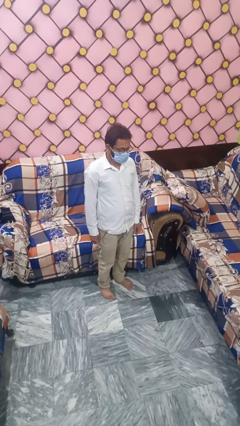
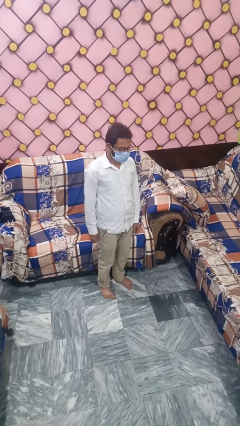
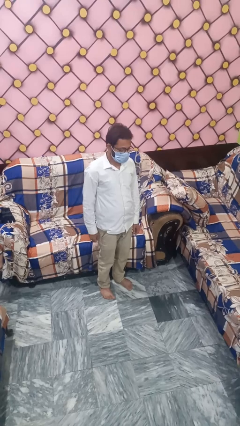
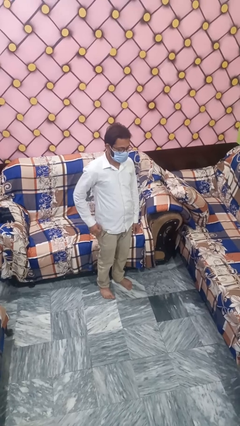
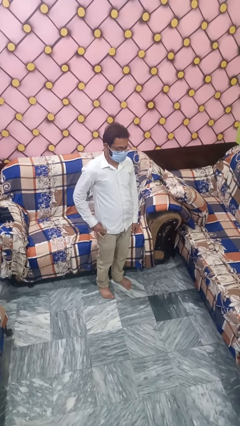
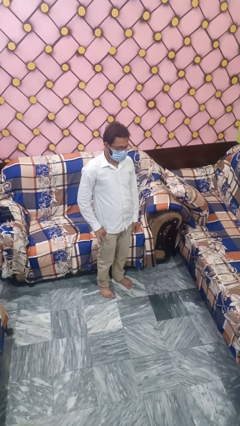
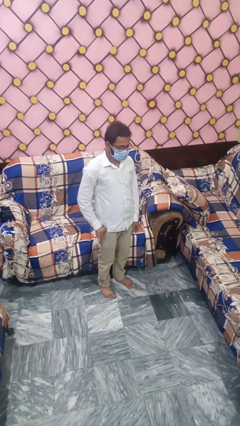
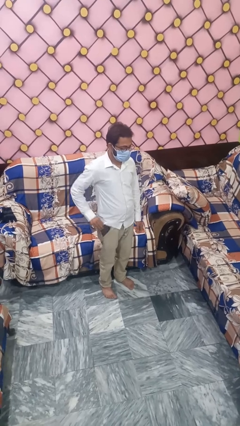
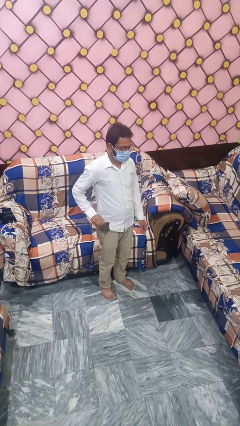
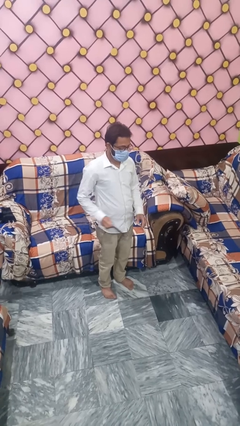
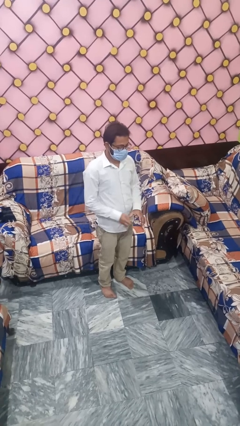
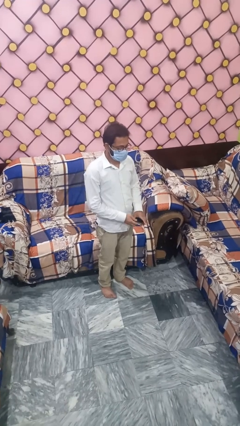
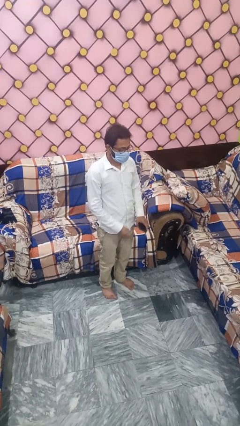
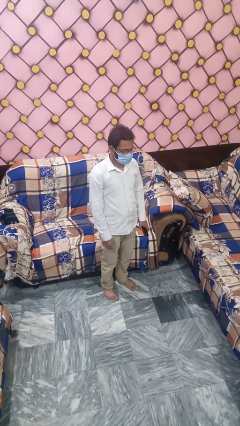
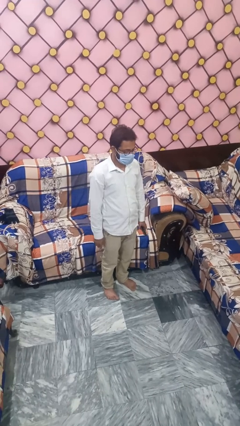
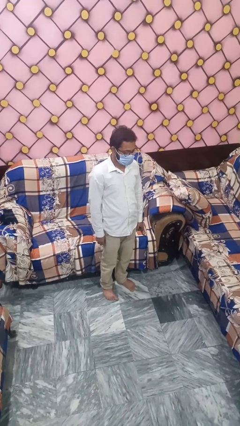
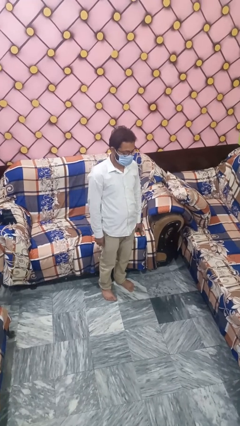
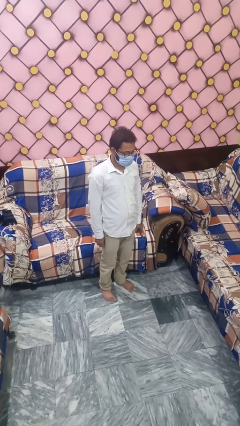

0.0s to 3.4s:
person puts phone into pocket

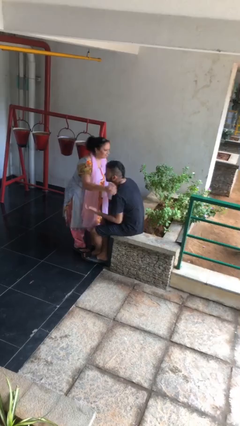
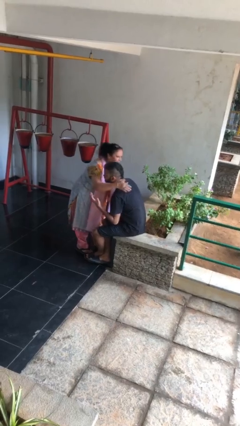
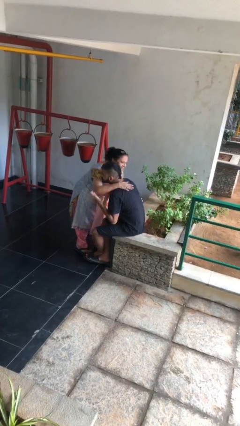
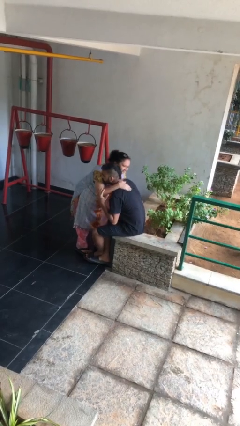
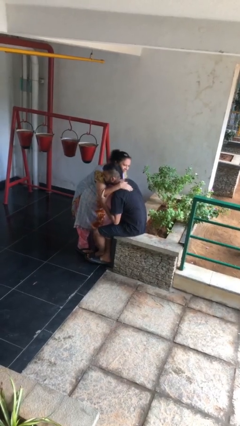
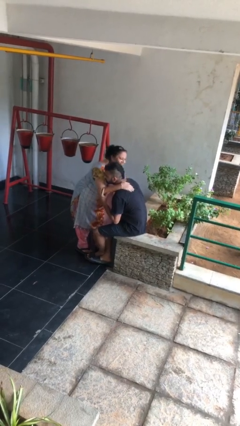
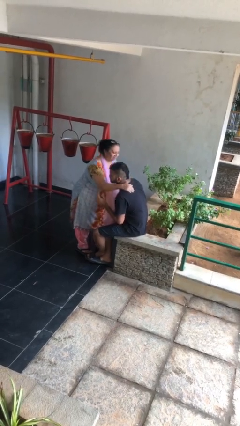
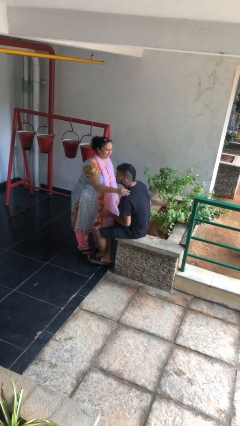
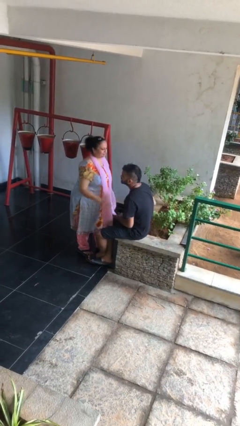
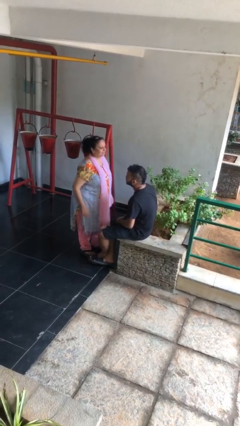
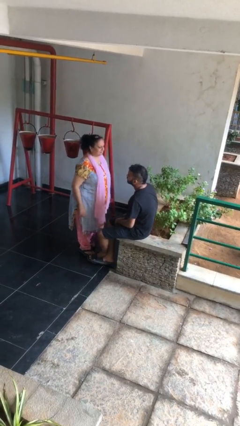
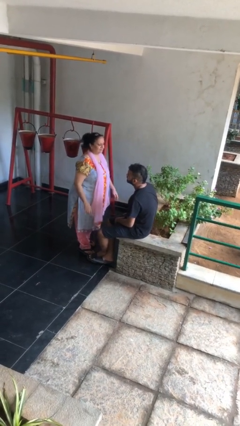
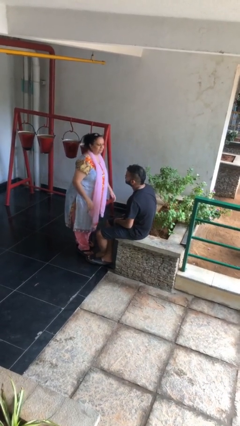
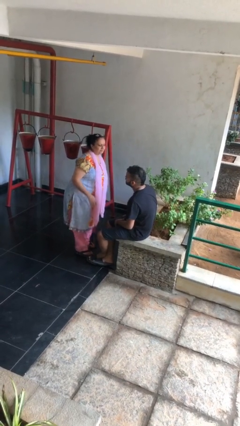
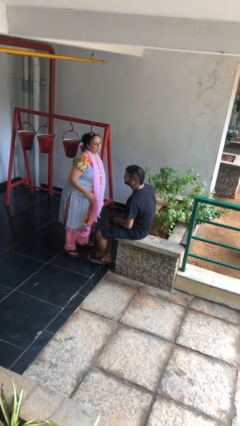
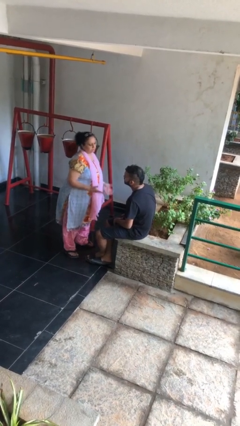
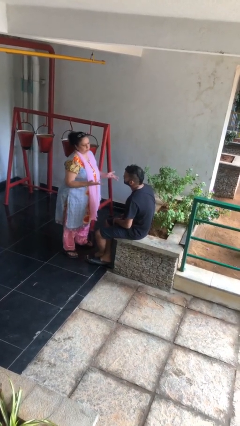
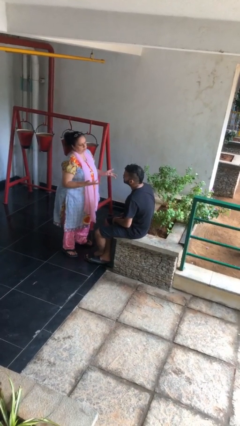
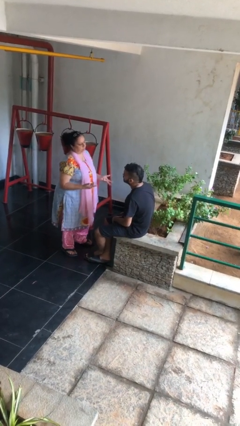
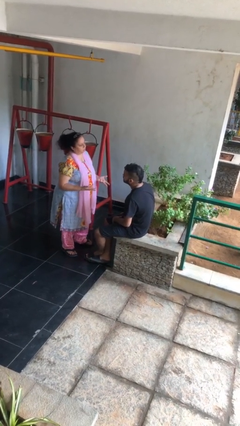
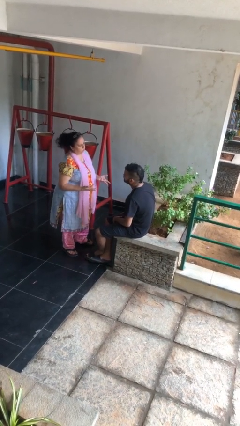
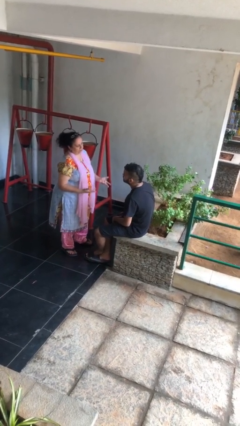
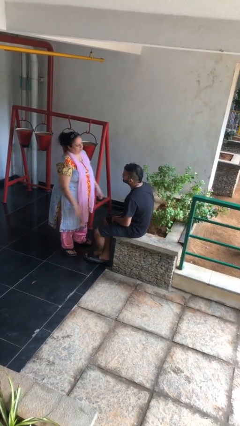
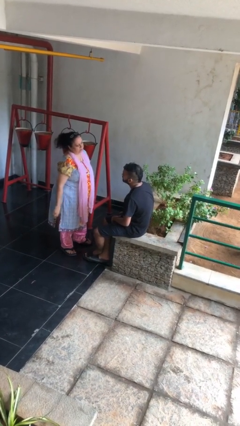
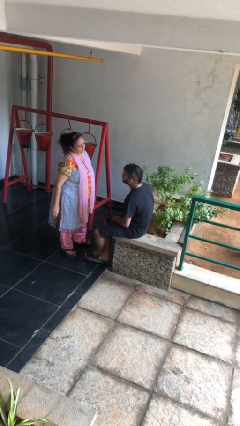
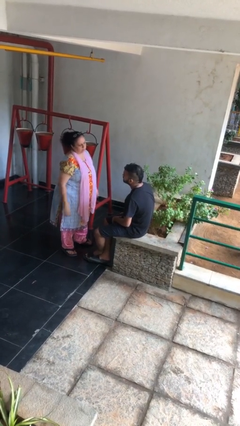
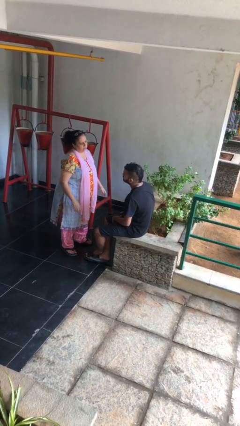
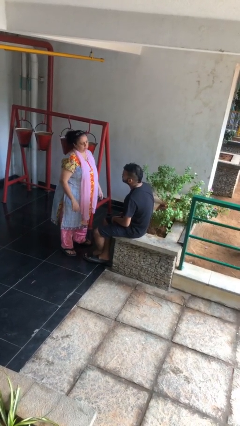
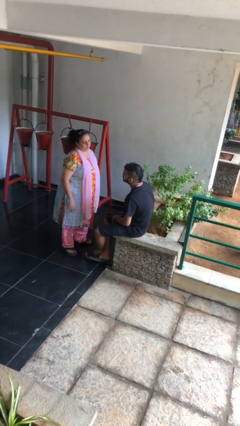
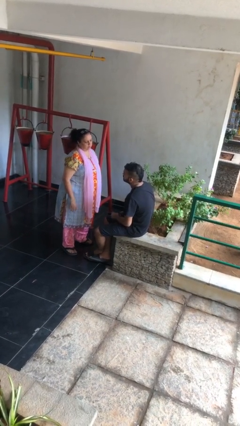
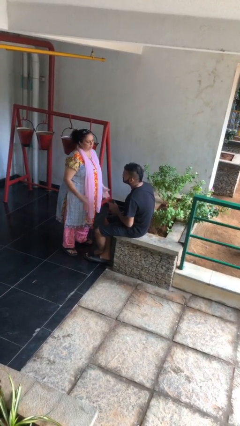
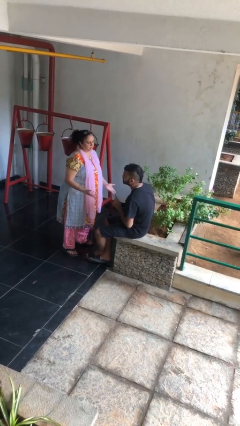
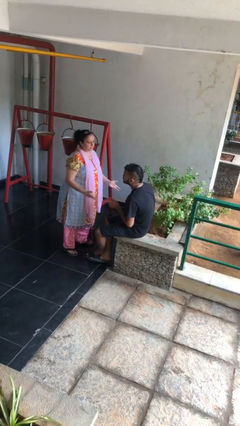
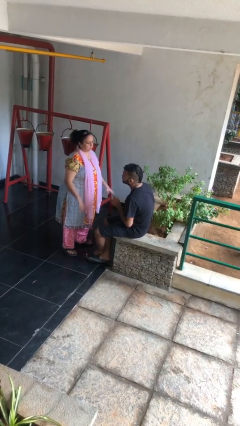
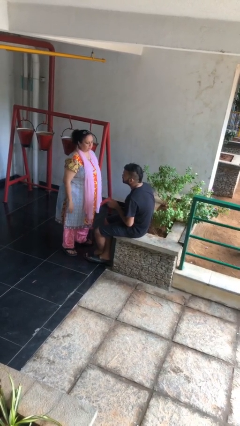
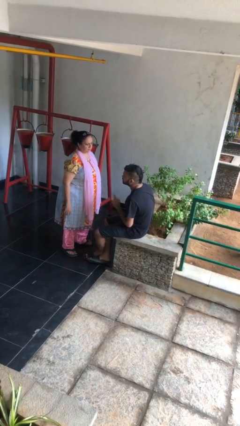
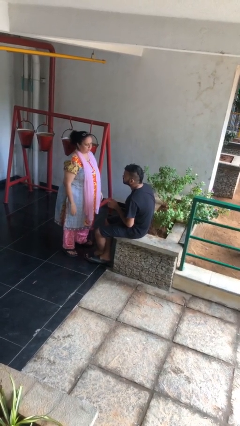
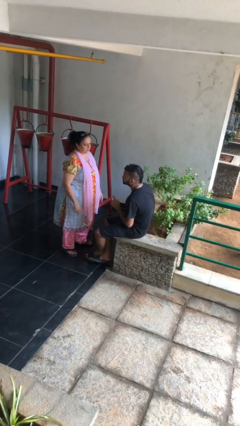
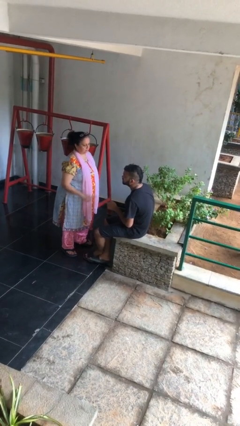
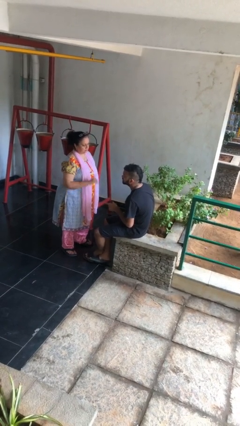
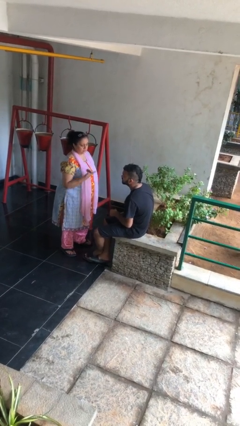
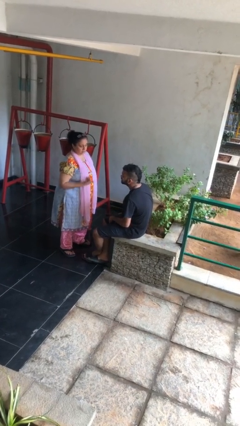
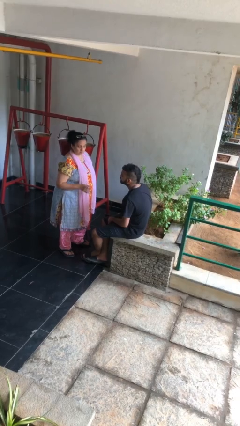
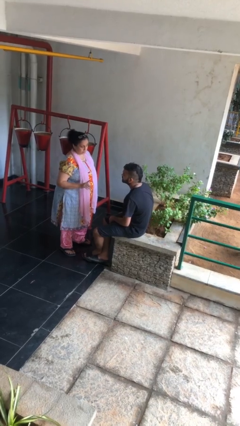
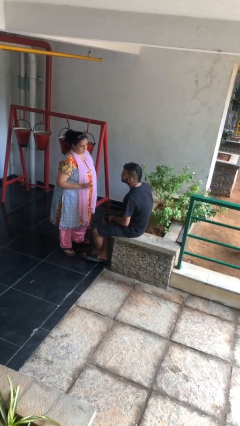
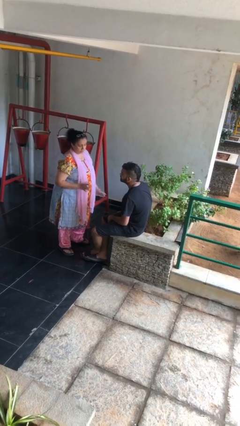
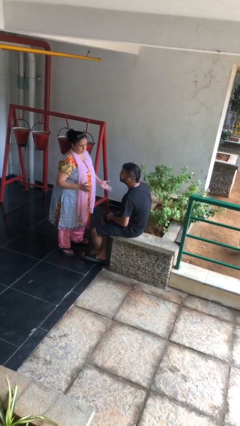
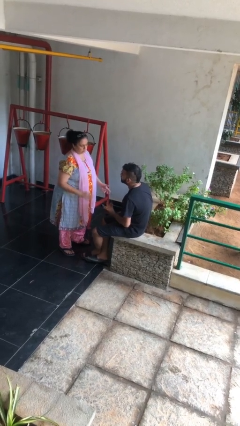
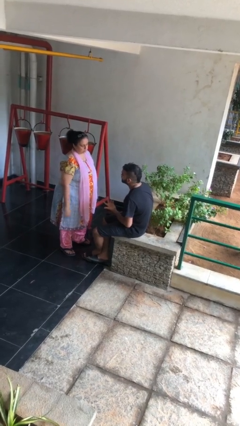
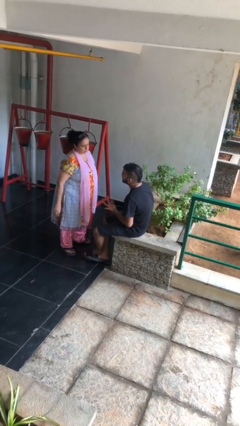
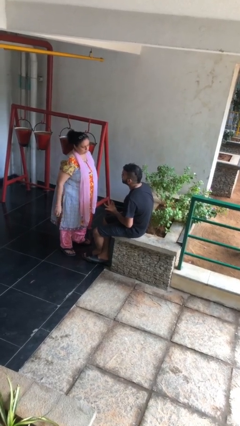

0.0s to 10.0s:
person embraces person

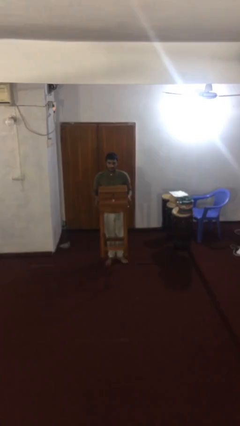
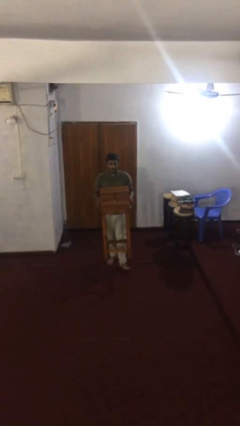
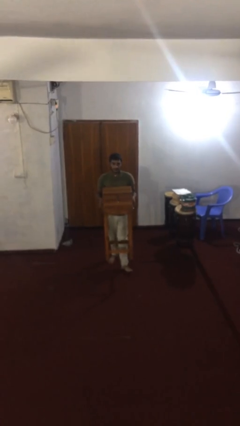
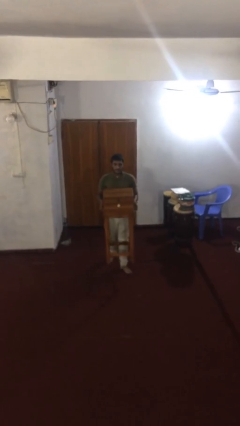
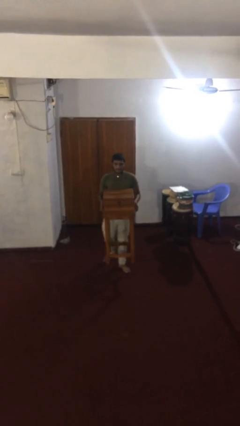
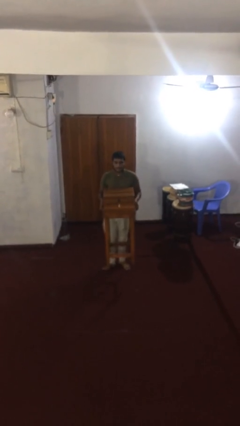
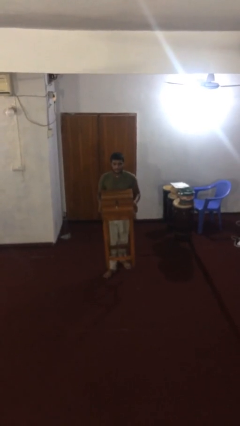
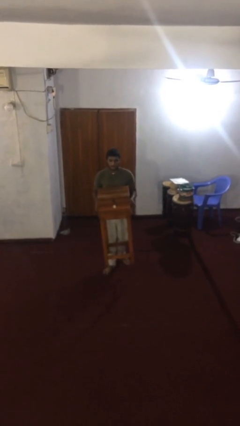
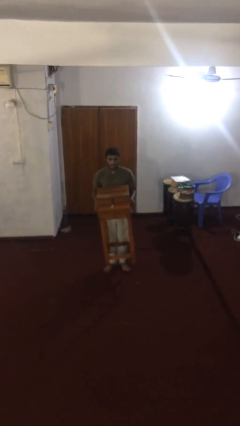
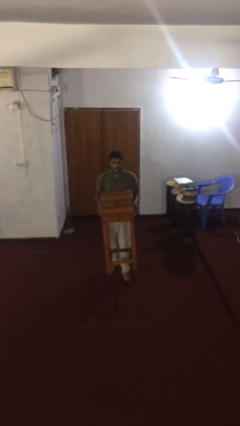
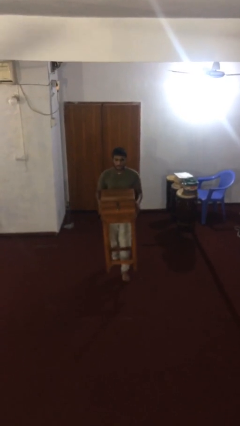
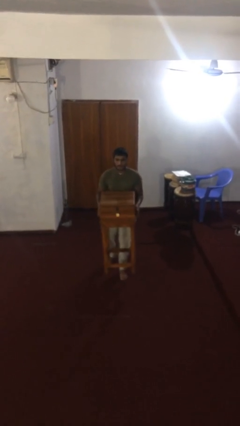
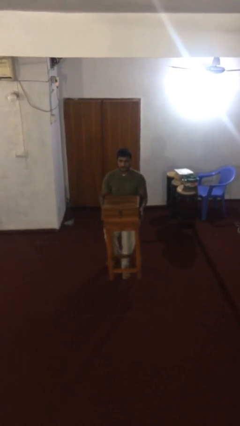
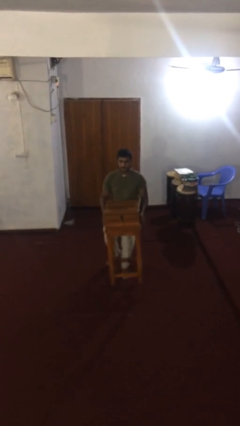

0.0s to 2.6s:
person carries heavy object

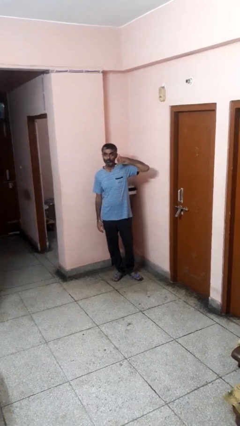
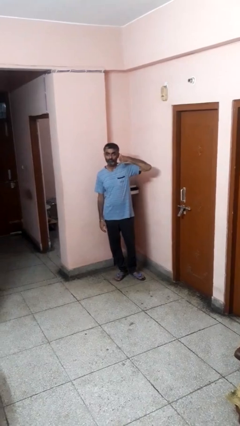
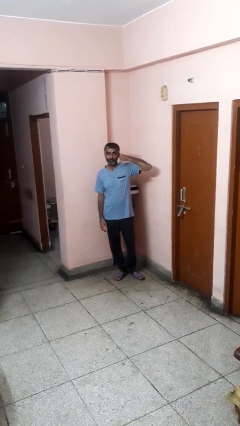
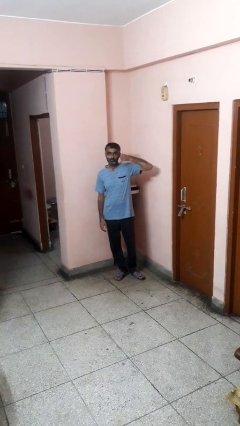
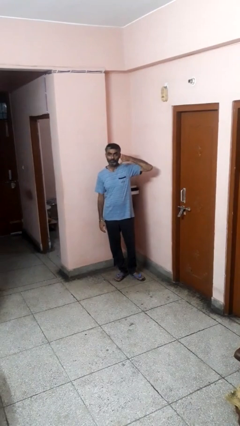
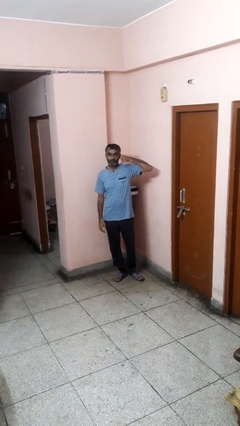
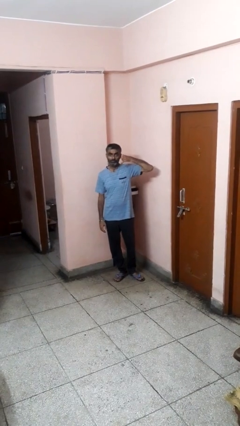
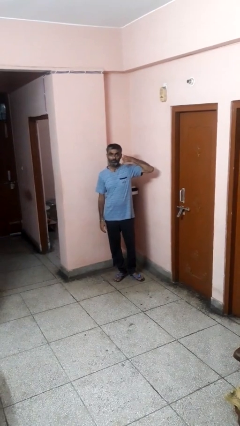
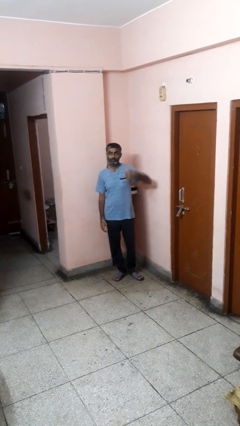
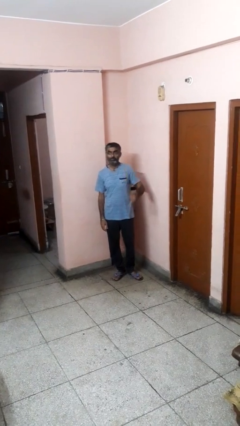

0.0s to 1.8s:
person gestures call me
